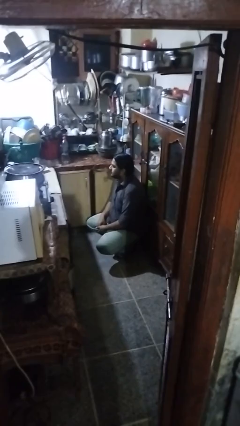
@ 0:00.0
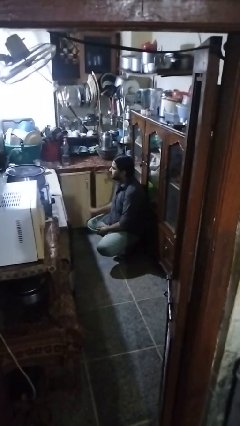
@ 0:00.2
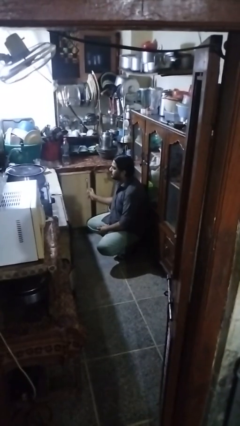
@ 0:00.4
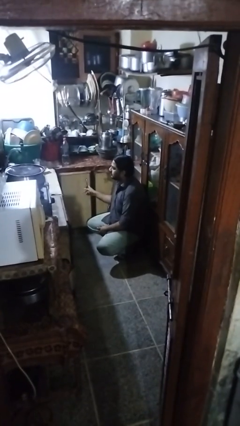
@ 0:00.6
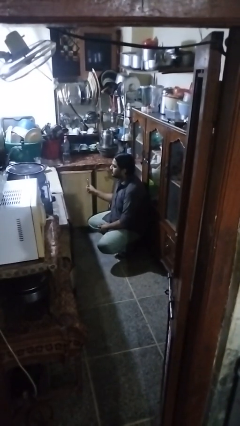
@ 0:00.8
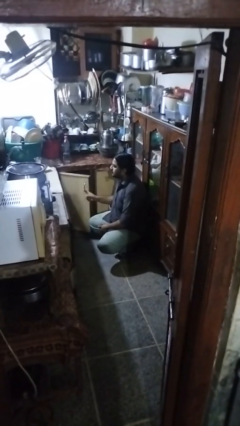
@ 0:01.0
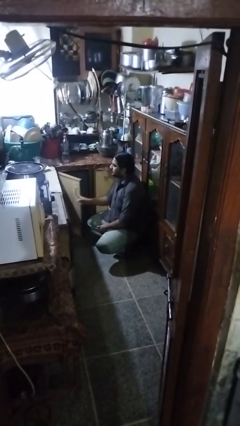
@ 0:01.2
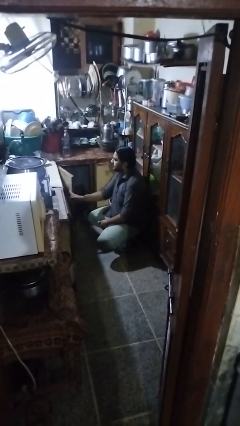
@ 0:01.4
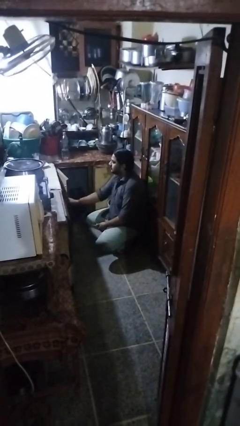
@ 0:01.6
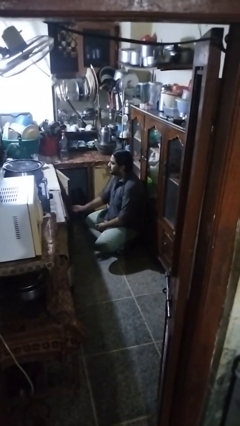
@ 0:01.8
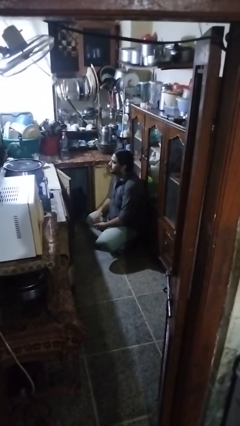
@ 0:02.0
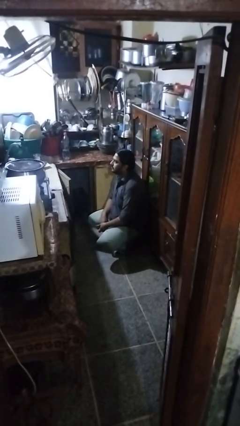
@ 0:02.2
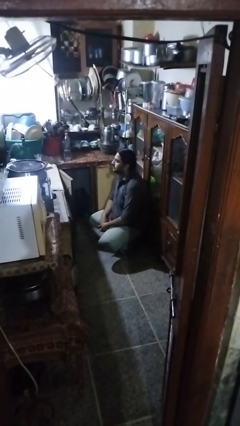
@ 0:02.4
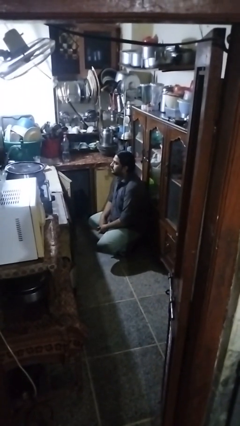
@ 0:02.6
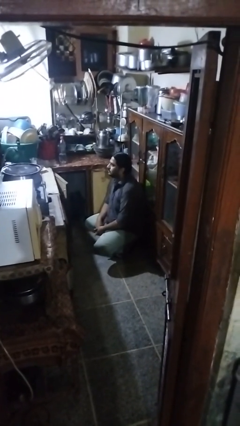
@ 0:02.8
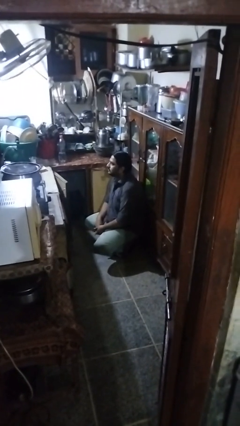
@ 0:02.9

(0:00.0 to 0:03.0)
person opens cabinet

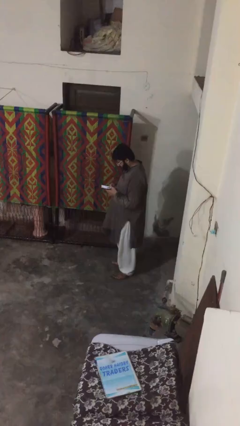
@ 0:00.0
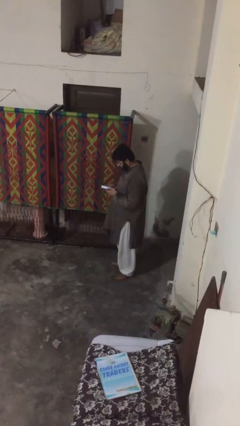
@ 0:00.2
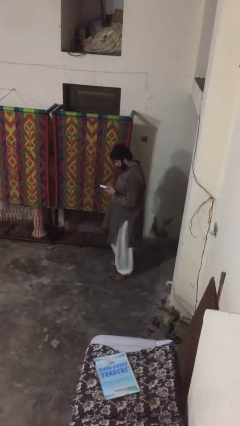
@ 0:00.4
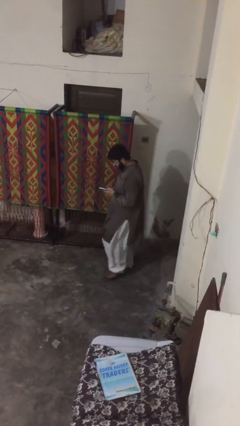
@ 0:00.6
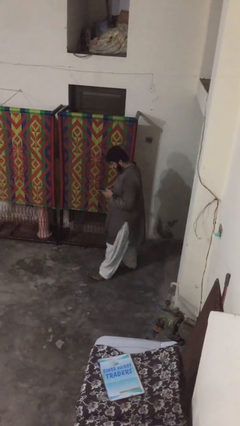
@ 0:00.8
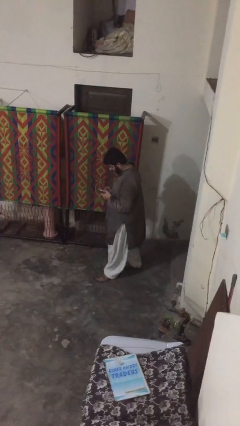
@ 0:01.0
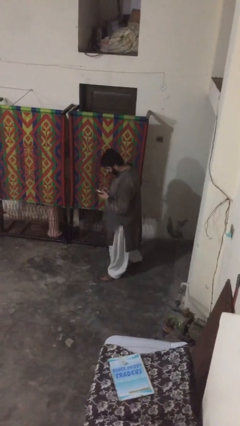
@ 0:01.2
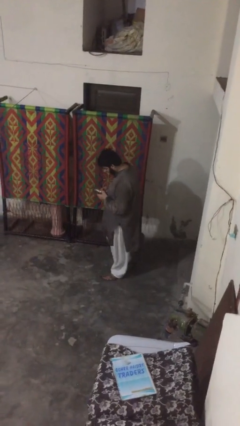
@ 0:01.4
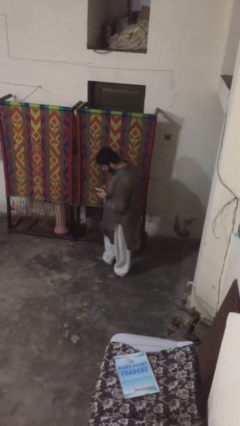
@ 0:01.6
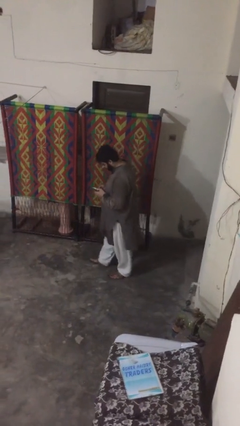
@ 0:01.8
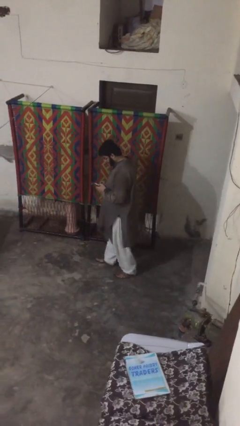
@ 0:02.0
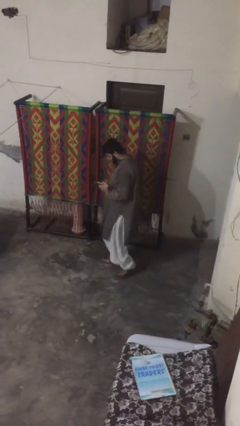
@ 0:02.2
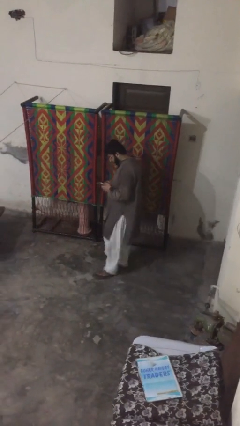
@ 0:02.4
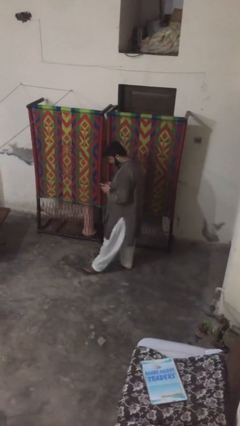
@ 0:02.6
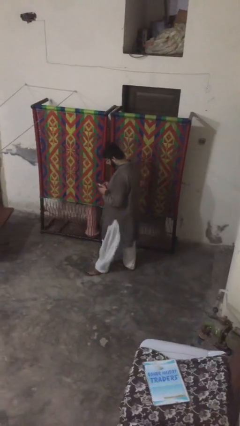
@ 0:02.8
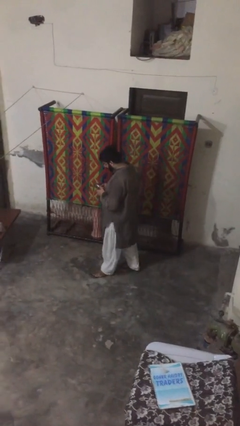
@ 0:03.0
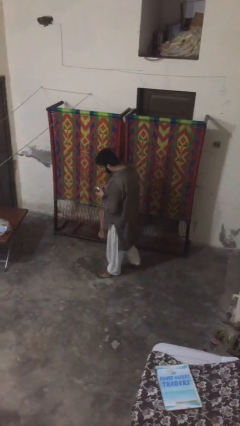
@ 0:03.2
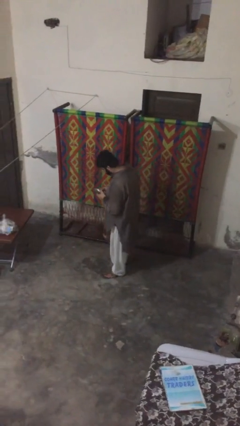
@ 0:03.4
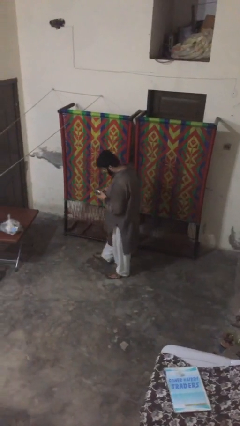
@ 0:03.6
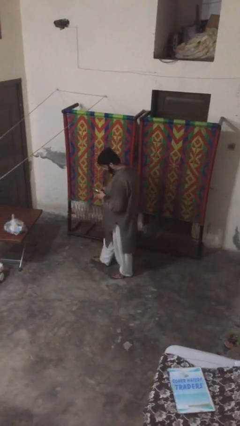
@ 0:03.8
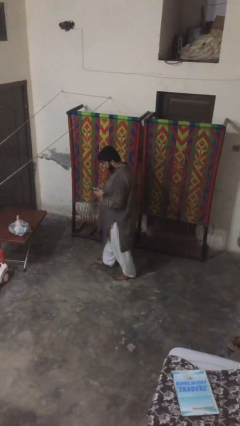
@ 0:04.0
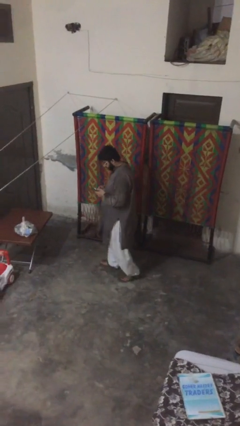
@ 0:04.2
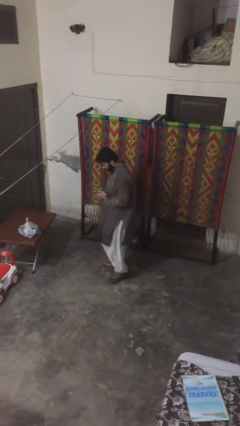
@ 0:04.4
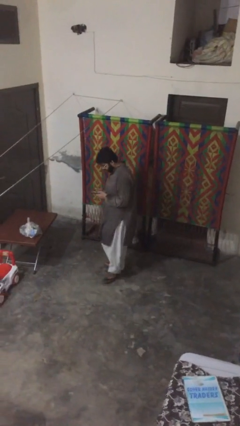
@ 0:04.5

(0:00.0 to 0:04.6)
person texts on phone

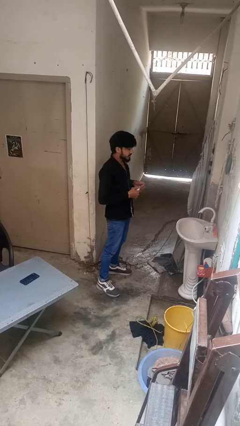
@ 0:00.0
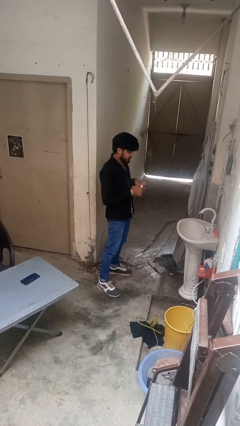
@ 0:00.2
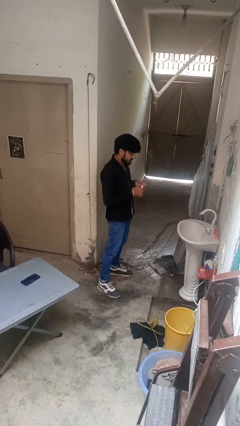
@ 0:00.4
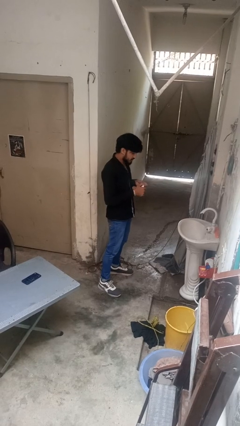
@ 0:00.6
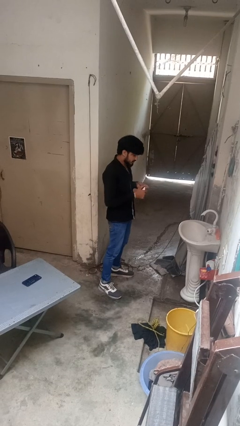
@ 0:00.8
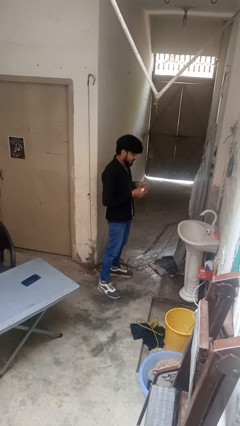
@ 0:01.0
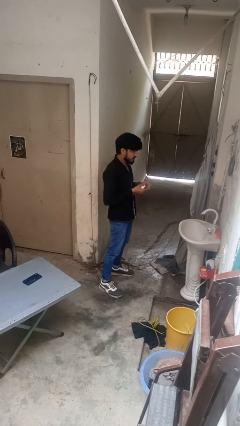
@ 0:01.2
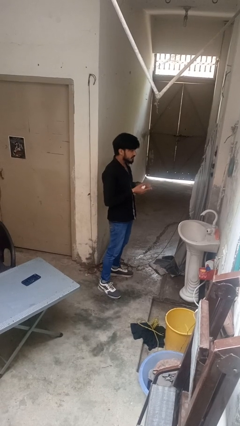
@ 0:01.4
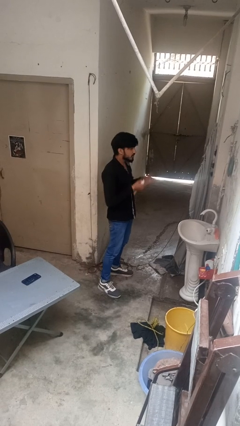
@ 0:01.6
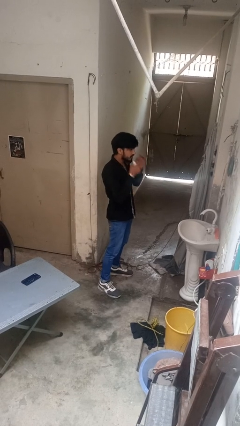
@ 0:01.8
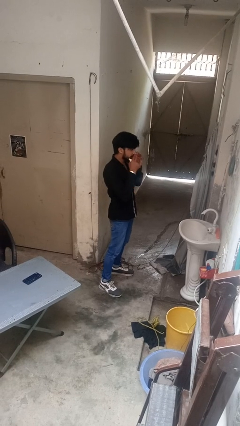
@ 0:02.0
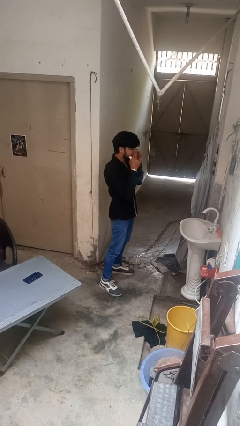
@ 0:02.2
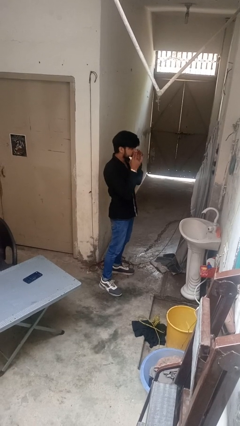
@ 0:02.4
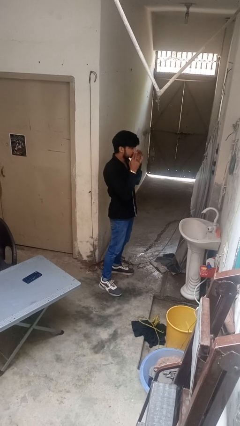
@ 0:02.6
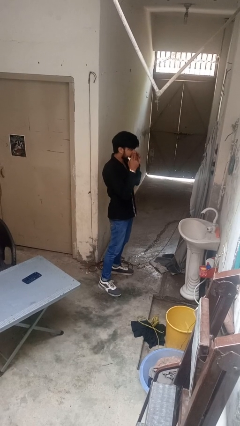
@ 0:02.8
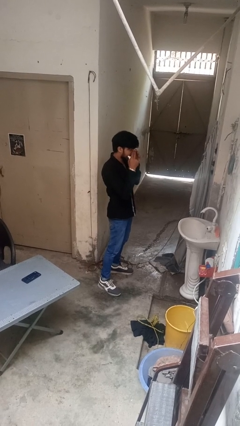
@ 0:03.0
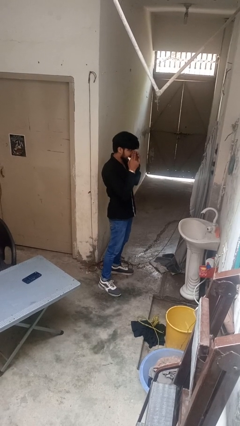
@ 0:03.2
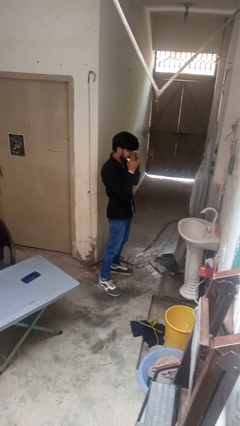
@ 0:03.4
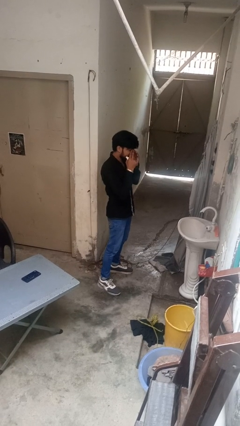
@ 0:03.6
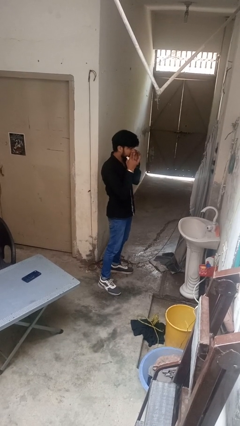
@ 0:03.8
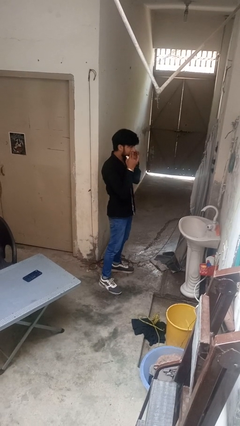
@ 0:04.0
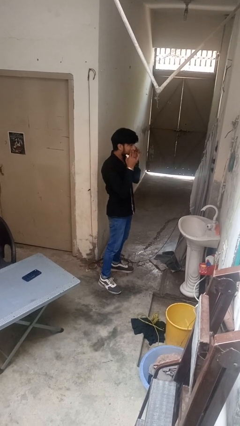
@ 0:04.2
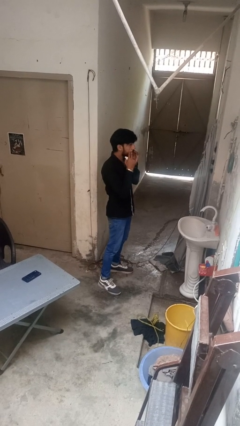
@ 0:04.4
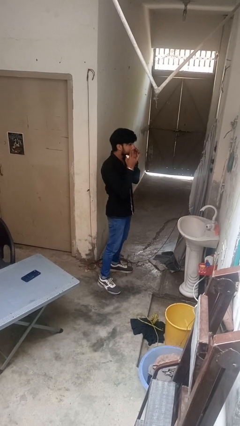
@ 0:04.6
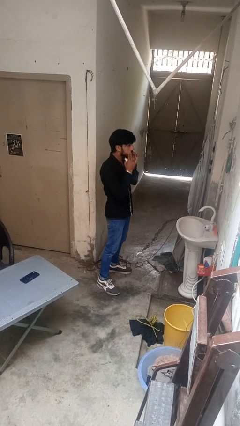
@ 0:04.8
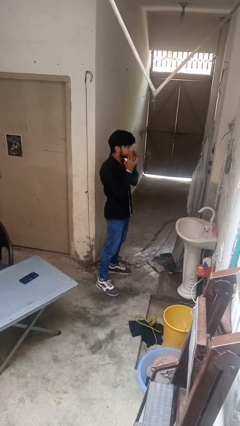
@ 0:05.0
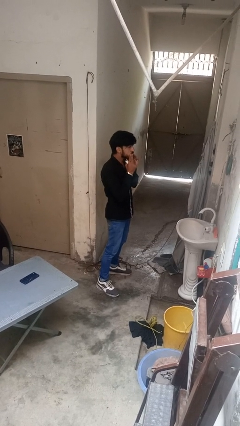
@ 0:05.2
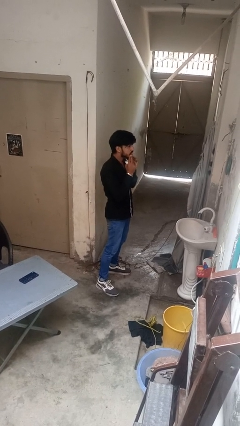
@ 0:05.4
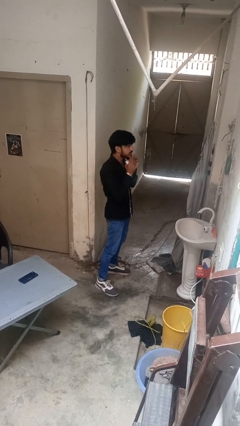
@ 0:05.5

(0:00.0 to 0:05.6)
person applies foundation makeup

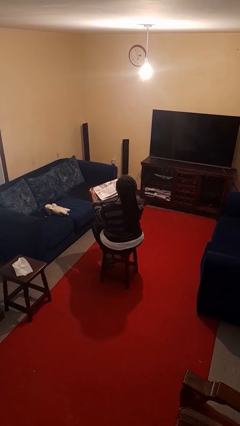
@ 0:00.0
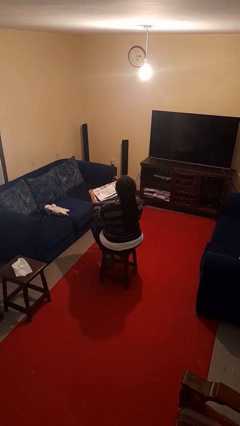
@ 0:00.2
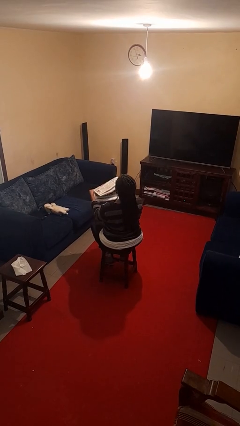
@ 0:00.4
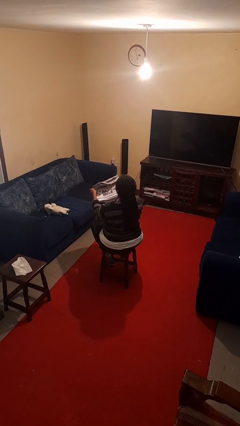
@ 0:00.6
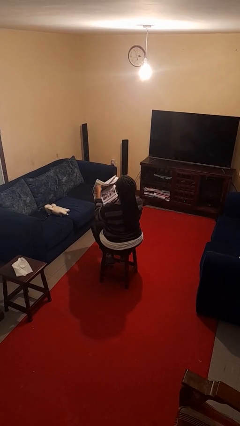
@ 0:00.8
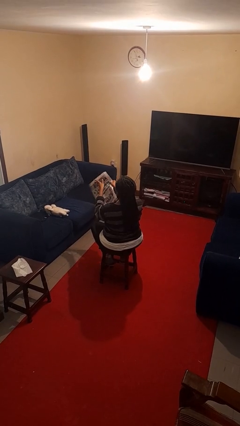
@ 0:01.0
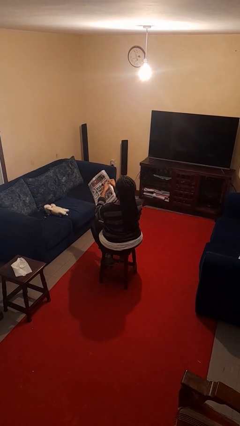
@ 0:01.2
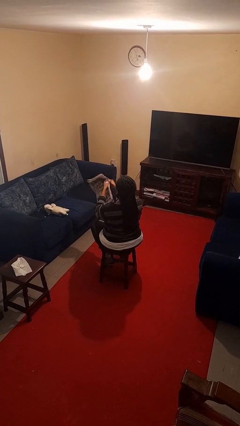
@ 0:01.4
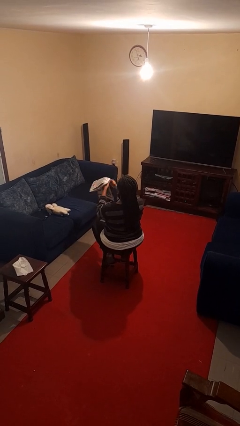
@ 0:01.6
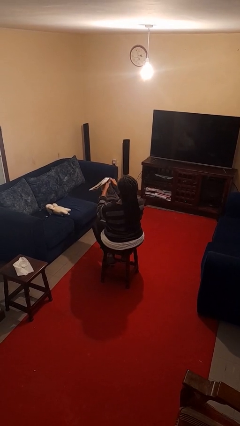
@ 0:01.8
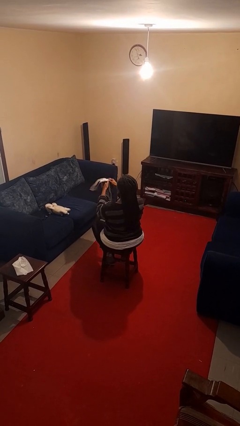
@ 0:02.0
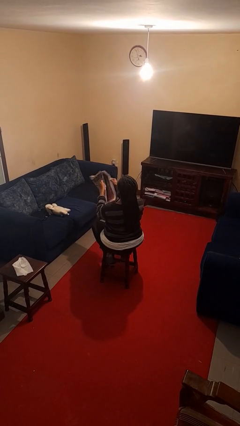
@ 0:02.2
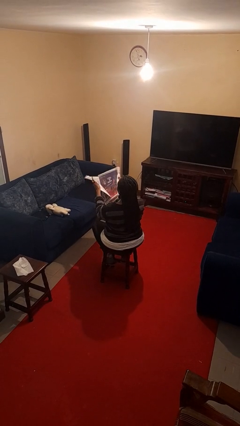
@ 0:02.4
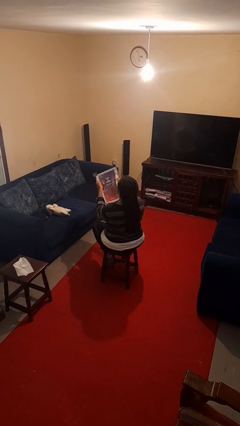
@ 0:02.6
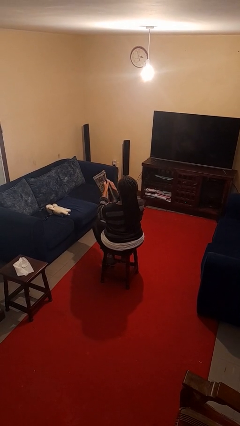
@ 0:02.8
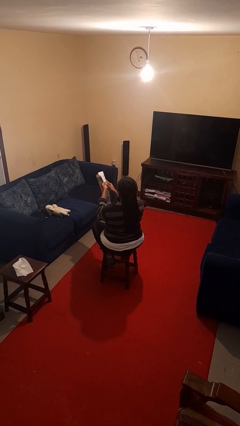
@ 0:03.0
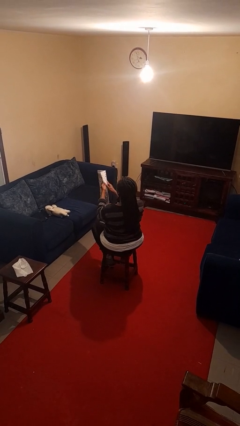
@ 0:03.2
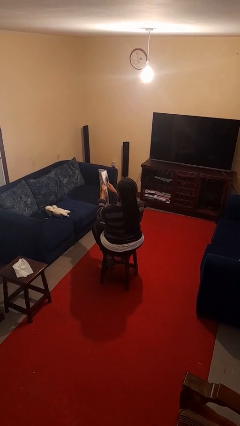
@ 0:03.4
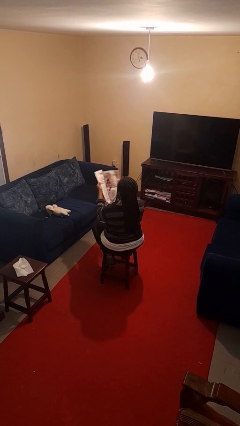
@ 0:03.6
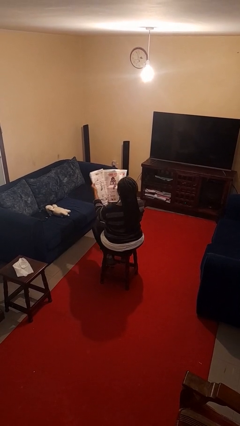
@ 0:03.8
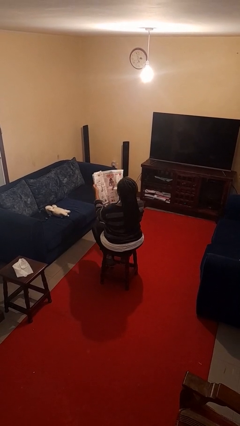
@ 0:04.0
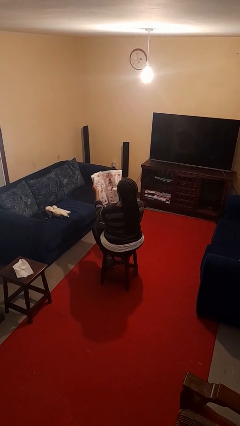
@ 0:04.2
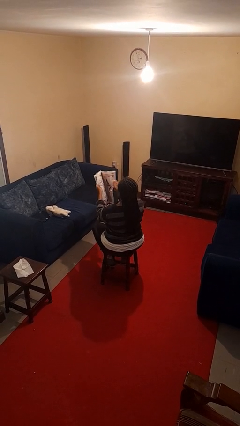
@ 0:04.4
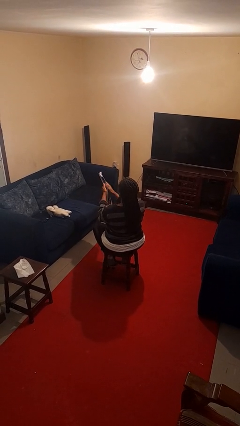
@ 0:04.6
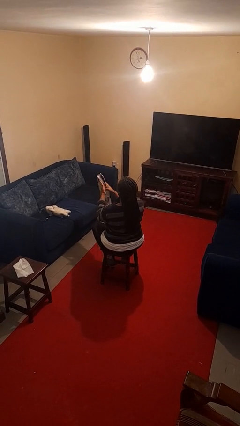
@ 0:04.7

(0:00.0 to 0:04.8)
person reads newspaper
